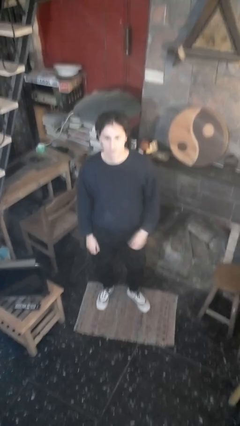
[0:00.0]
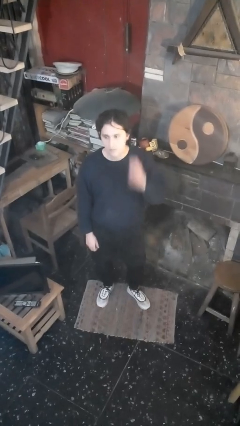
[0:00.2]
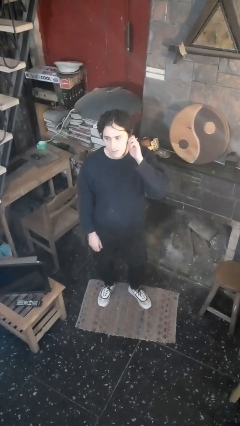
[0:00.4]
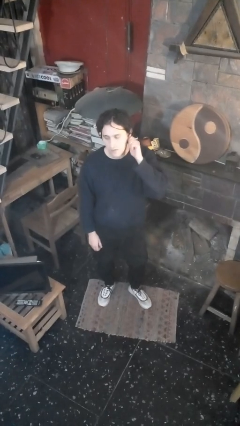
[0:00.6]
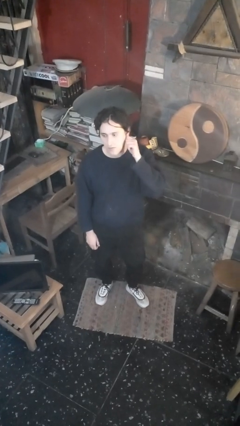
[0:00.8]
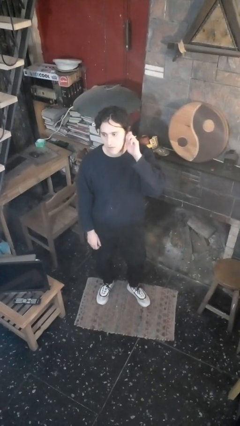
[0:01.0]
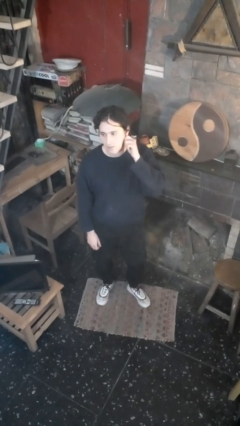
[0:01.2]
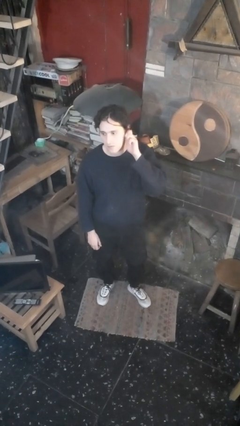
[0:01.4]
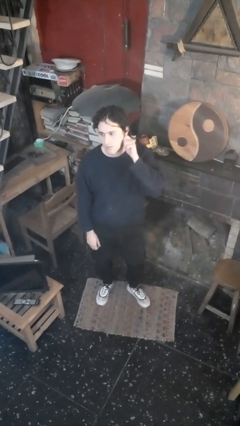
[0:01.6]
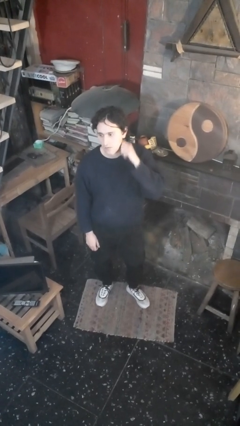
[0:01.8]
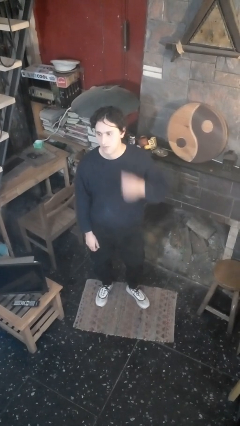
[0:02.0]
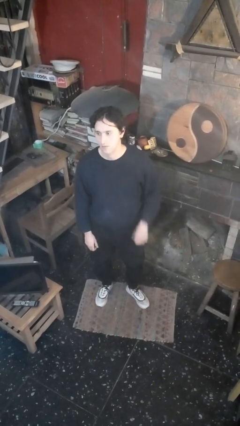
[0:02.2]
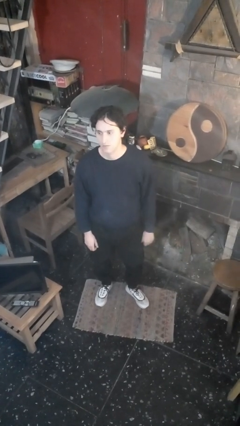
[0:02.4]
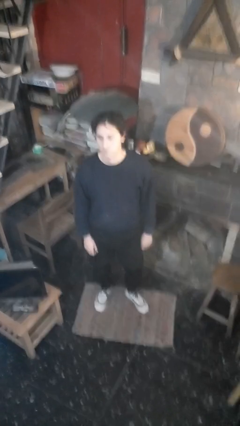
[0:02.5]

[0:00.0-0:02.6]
person touches earlobe

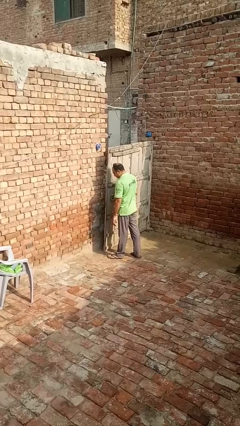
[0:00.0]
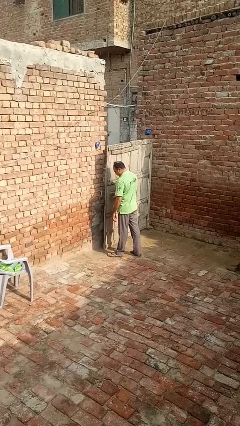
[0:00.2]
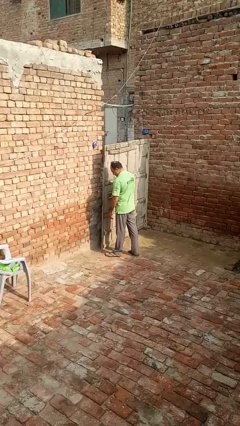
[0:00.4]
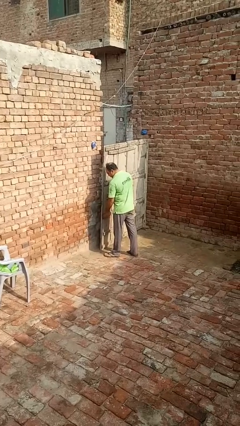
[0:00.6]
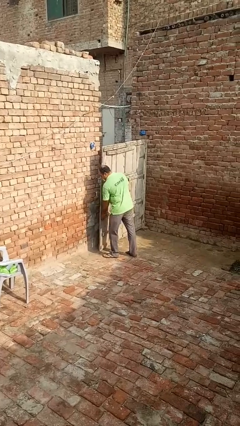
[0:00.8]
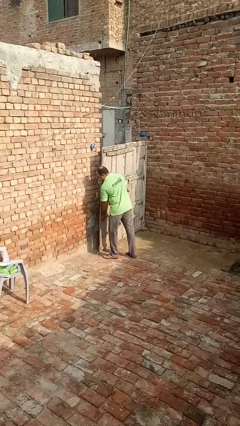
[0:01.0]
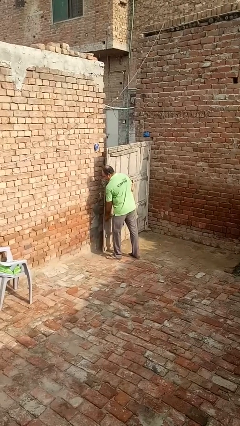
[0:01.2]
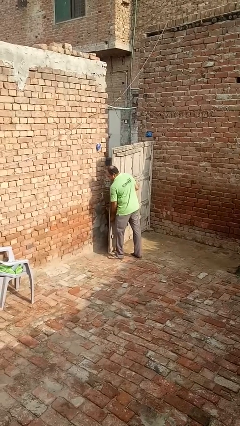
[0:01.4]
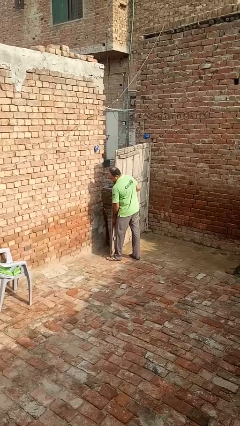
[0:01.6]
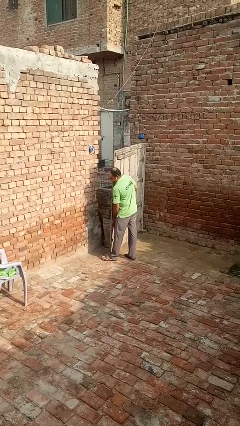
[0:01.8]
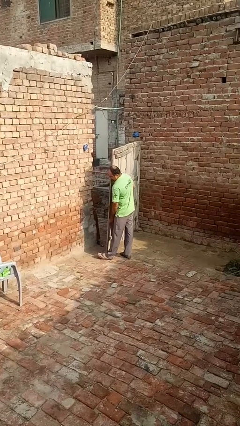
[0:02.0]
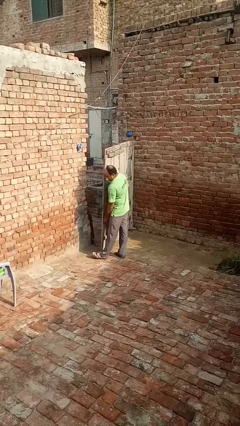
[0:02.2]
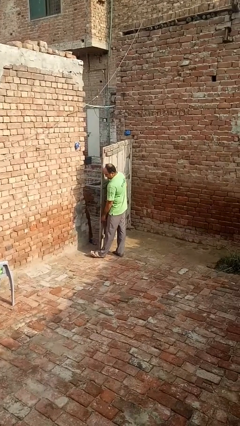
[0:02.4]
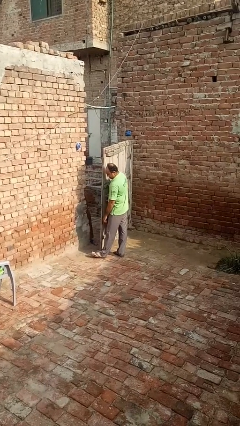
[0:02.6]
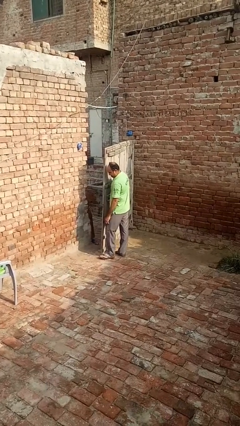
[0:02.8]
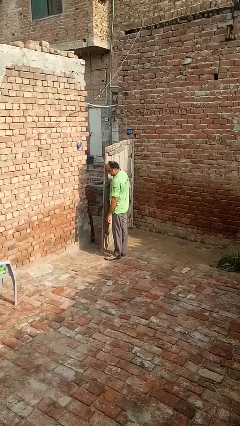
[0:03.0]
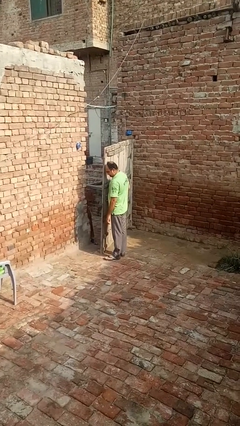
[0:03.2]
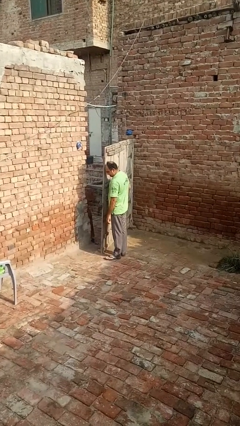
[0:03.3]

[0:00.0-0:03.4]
person opens gate

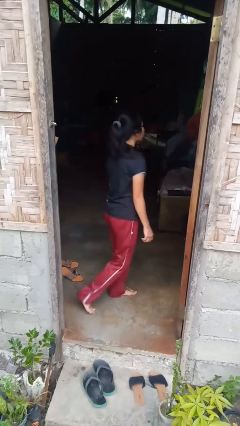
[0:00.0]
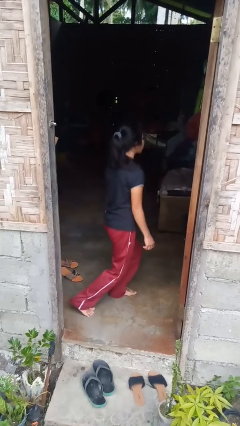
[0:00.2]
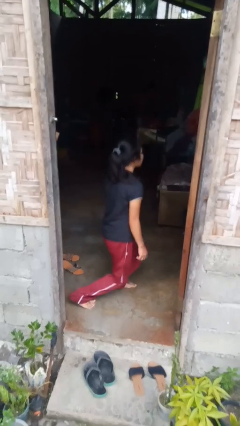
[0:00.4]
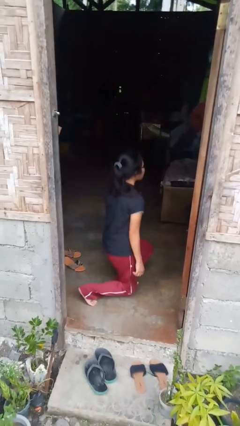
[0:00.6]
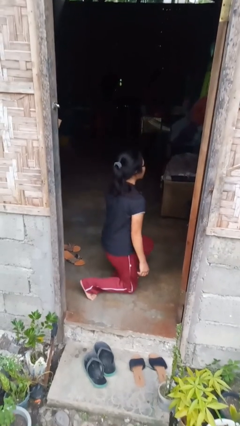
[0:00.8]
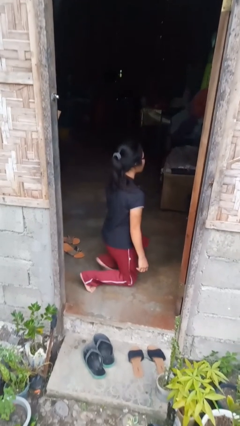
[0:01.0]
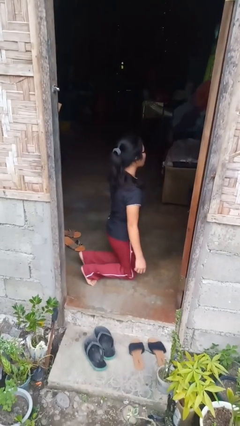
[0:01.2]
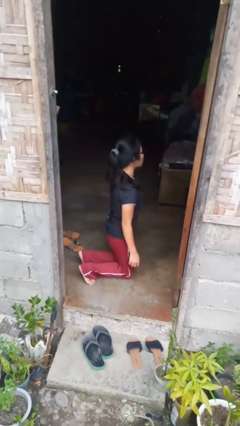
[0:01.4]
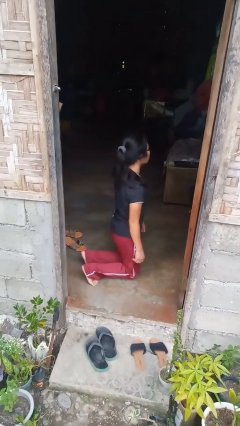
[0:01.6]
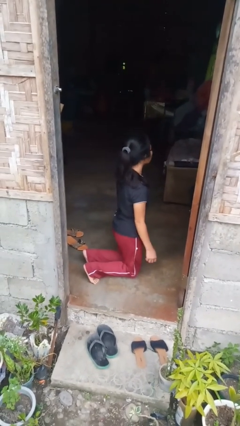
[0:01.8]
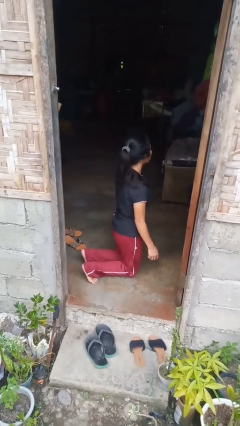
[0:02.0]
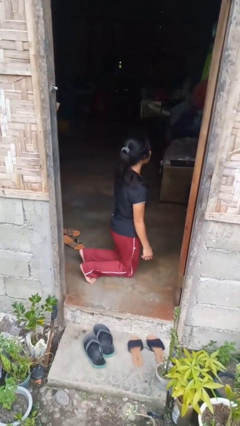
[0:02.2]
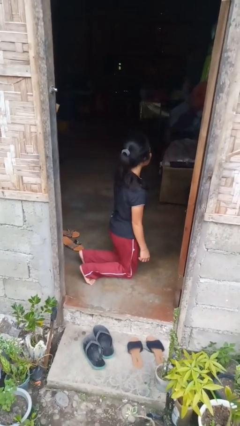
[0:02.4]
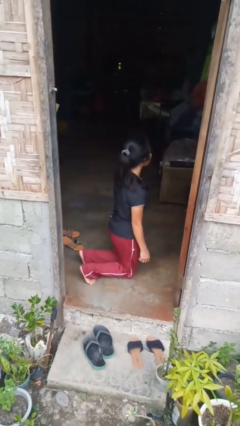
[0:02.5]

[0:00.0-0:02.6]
person kneels

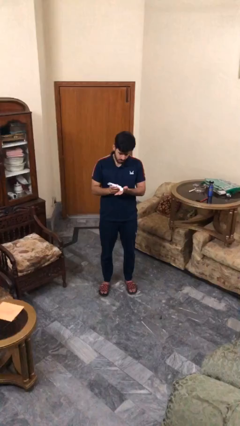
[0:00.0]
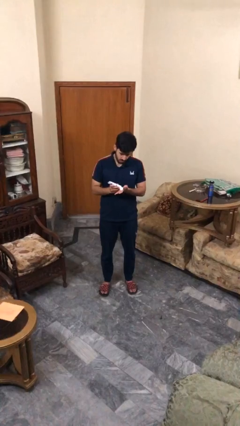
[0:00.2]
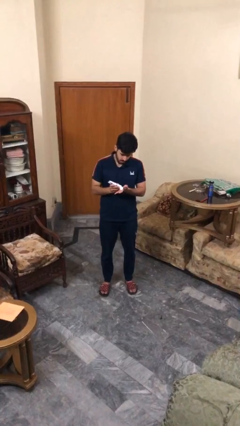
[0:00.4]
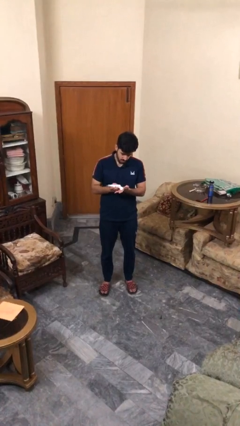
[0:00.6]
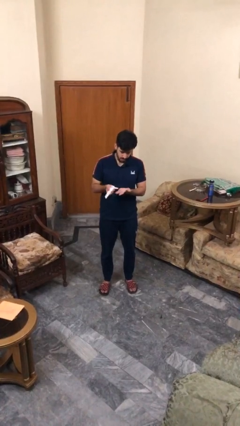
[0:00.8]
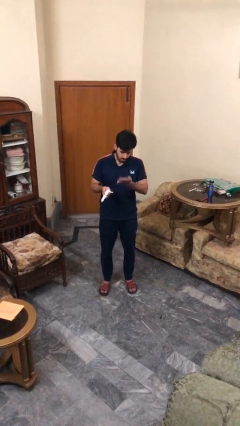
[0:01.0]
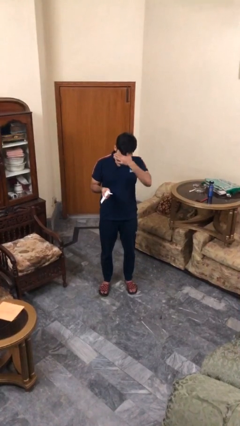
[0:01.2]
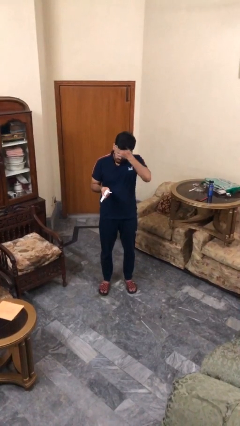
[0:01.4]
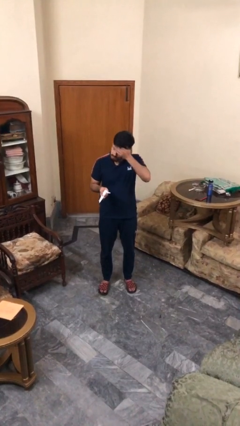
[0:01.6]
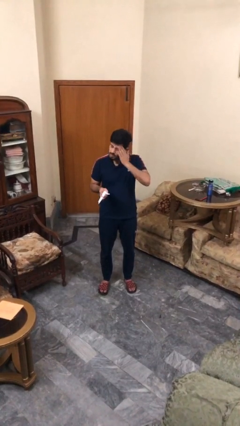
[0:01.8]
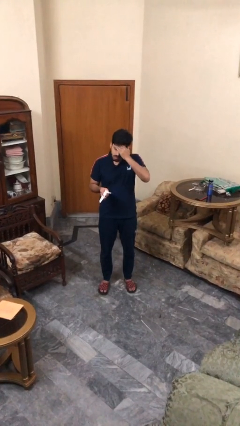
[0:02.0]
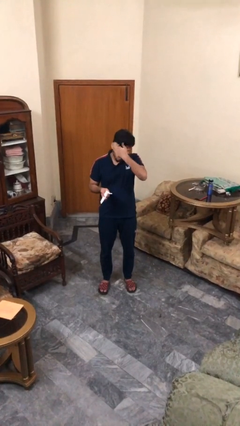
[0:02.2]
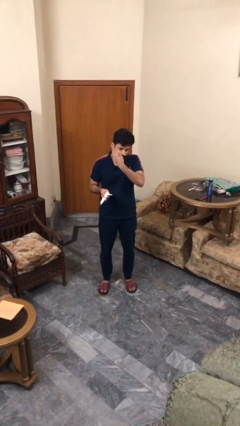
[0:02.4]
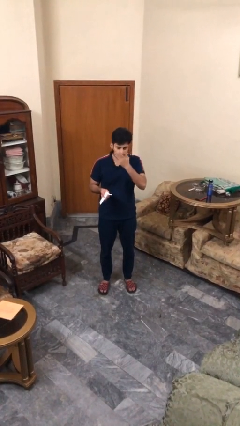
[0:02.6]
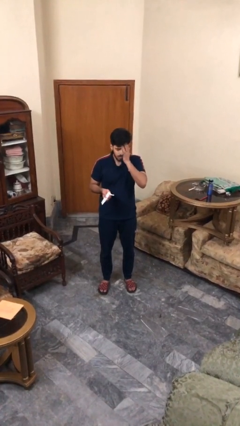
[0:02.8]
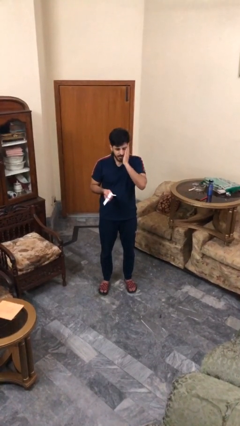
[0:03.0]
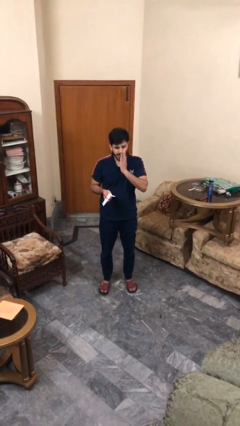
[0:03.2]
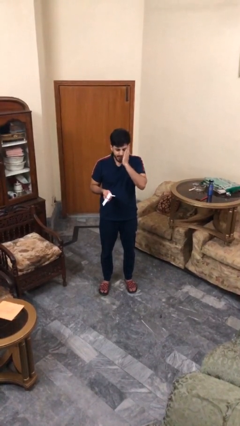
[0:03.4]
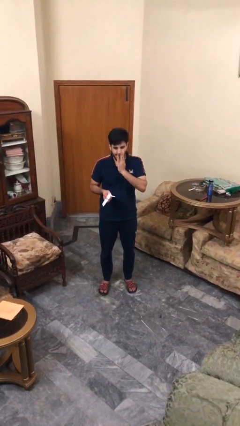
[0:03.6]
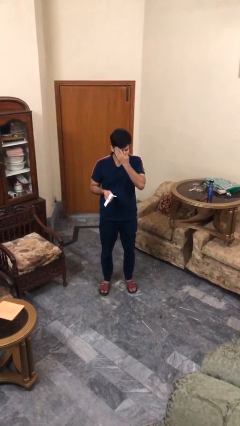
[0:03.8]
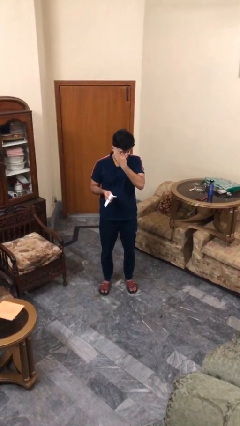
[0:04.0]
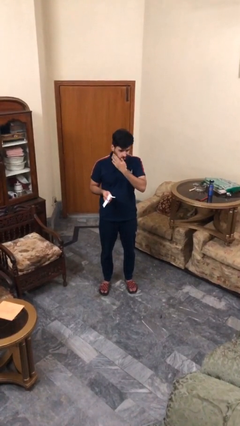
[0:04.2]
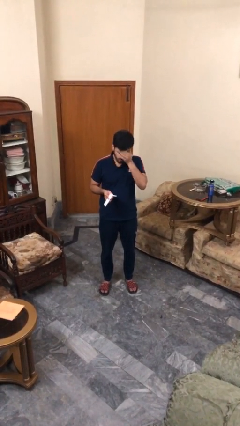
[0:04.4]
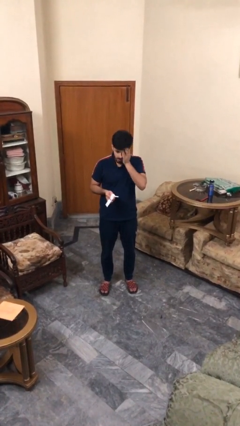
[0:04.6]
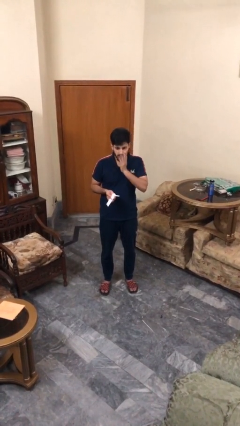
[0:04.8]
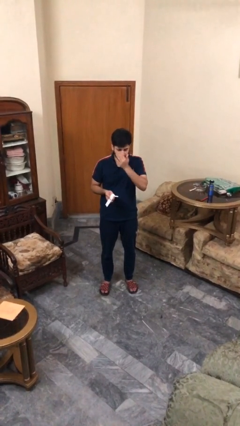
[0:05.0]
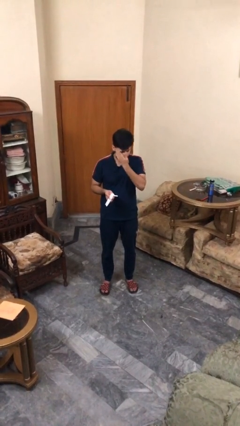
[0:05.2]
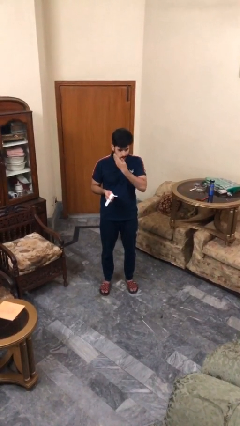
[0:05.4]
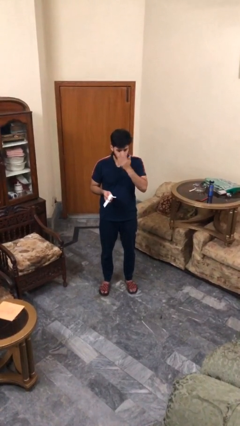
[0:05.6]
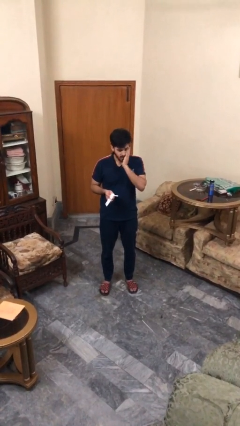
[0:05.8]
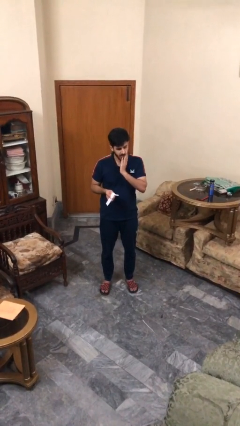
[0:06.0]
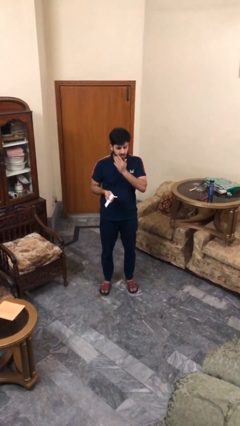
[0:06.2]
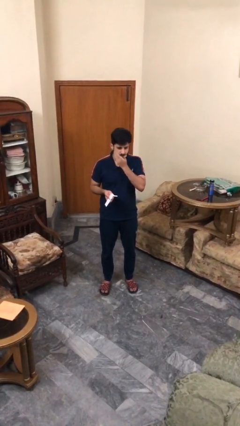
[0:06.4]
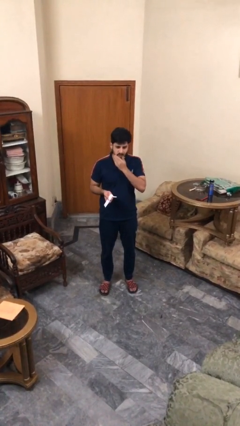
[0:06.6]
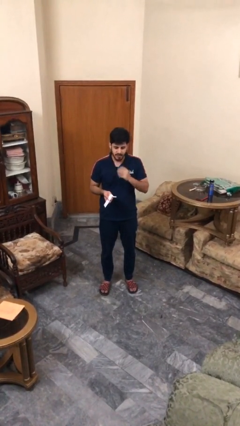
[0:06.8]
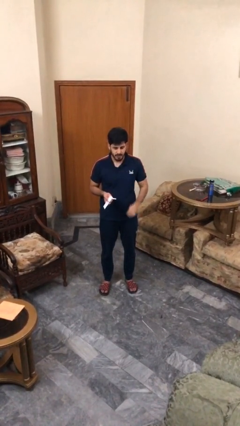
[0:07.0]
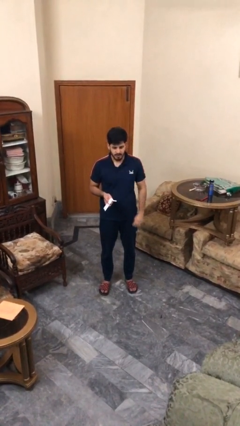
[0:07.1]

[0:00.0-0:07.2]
person applies facial moisturizer

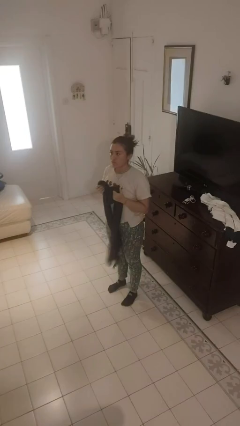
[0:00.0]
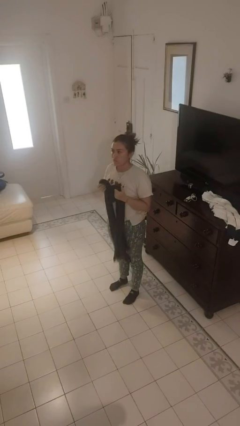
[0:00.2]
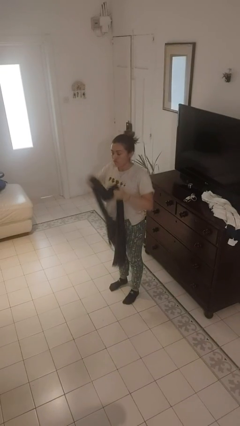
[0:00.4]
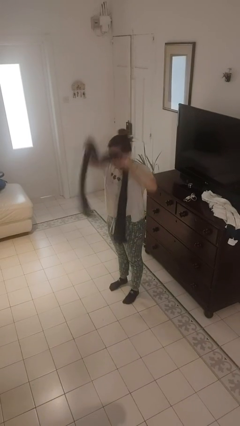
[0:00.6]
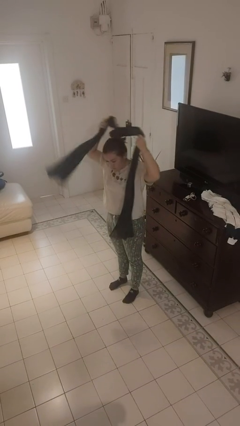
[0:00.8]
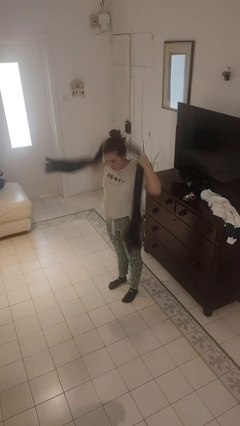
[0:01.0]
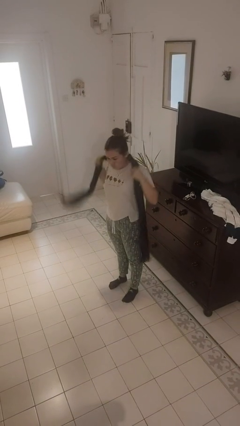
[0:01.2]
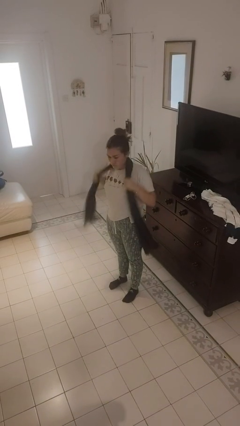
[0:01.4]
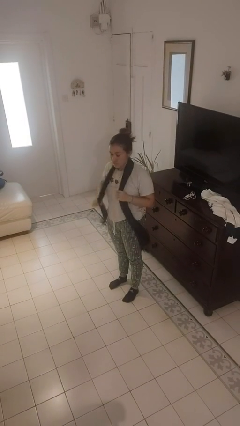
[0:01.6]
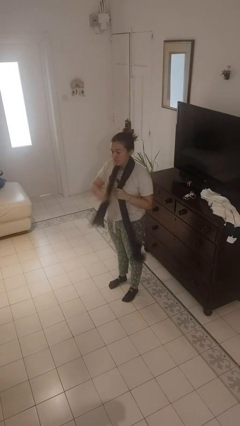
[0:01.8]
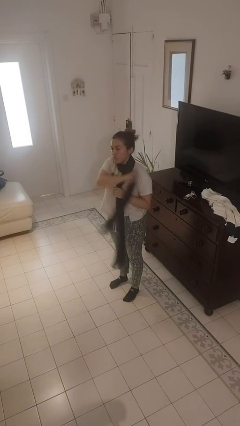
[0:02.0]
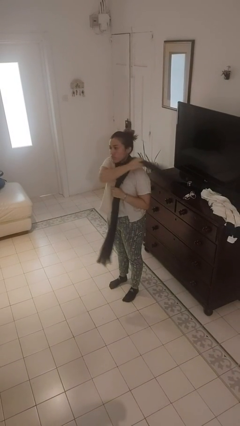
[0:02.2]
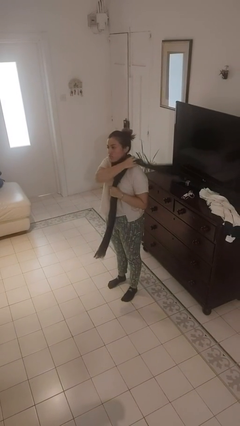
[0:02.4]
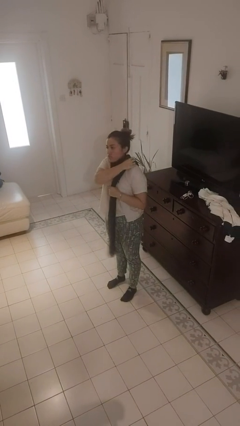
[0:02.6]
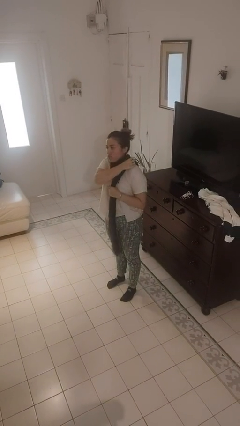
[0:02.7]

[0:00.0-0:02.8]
person puts on scarf
